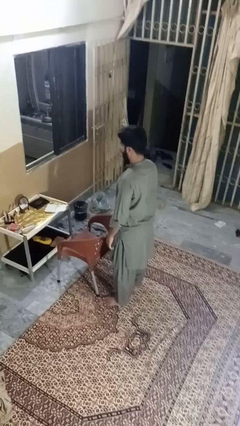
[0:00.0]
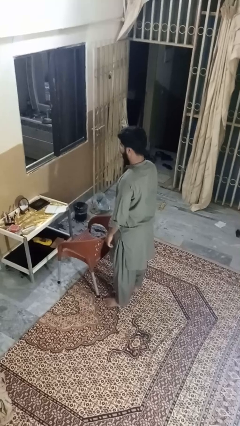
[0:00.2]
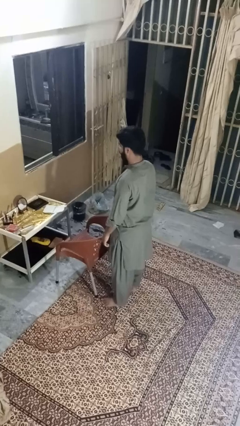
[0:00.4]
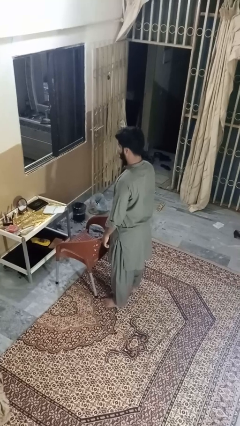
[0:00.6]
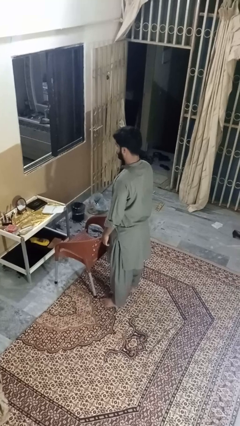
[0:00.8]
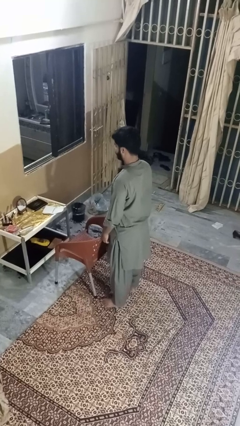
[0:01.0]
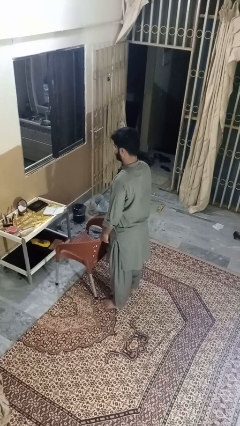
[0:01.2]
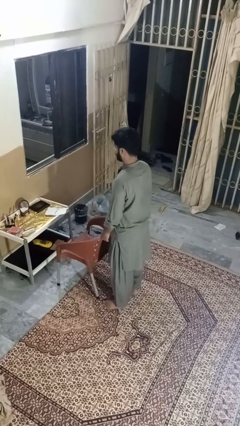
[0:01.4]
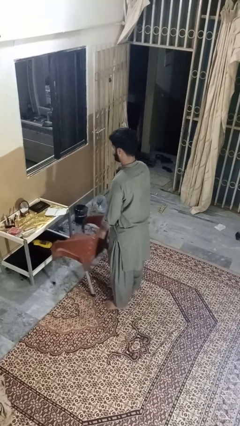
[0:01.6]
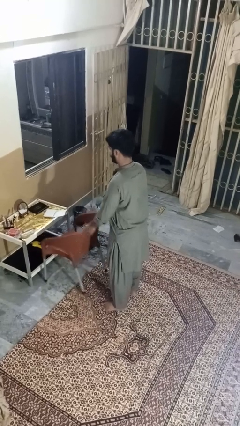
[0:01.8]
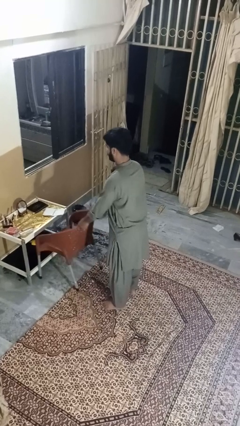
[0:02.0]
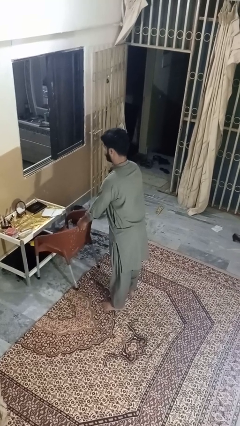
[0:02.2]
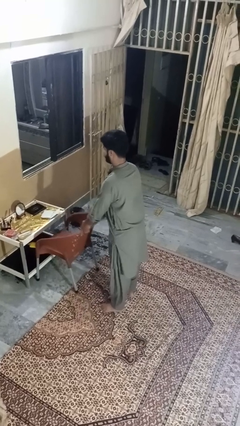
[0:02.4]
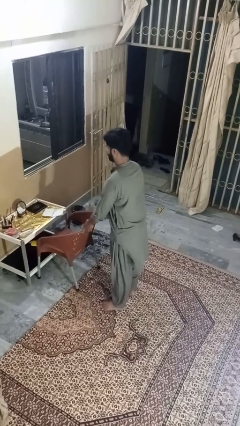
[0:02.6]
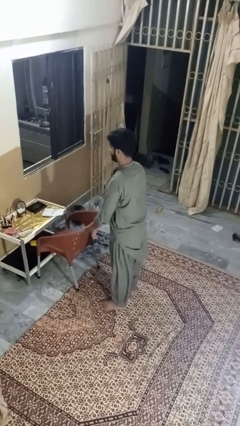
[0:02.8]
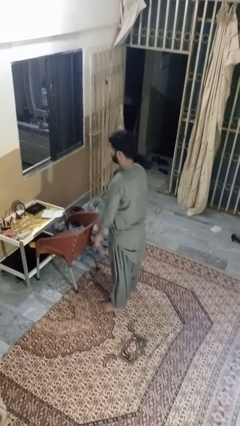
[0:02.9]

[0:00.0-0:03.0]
person pushes in chair

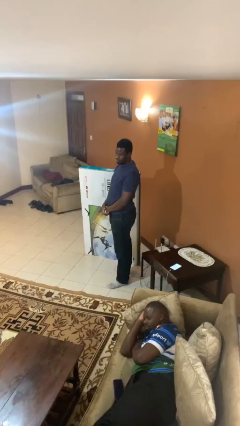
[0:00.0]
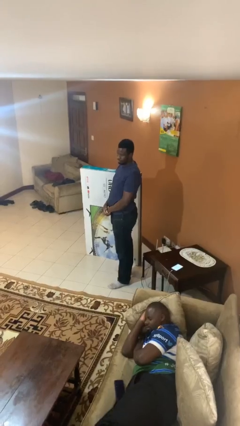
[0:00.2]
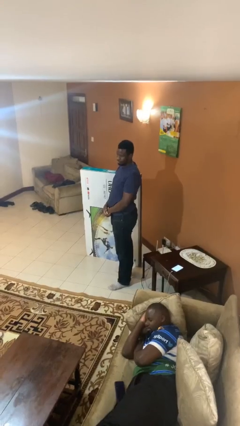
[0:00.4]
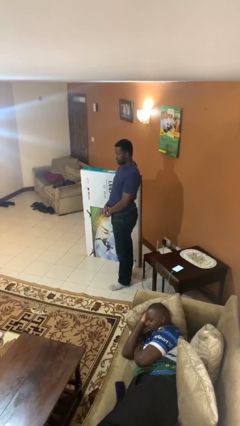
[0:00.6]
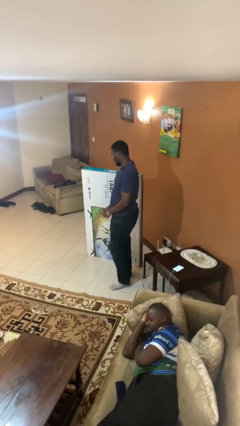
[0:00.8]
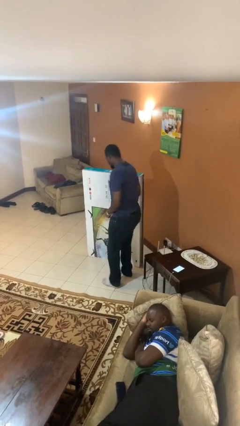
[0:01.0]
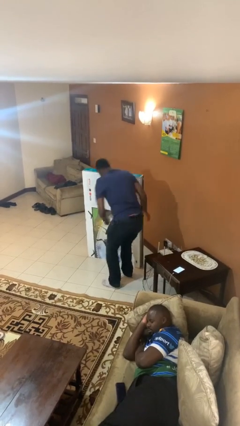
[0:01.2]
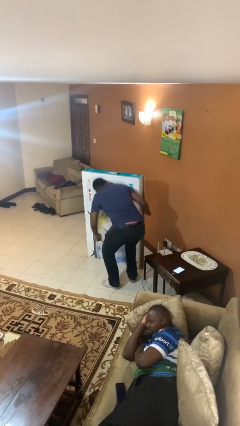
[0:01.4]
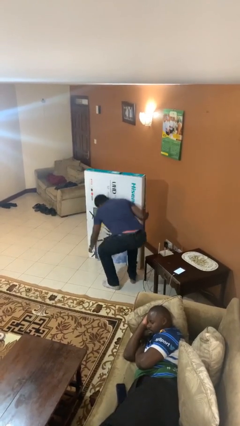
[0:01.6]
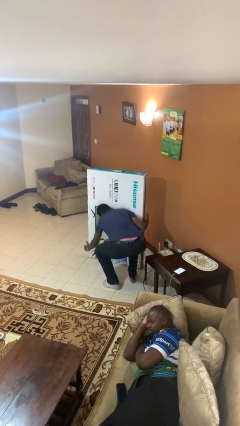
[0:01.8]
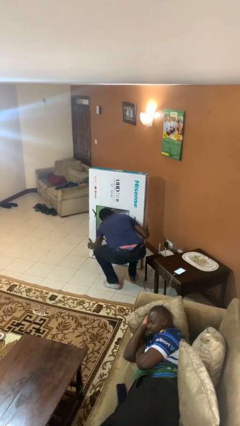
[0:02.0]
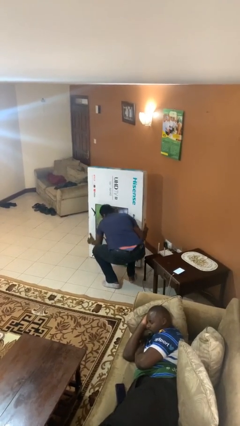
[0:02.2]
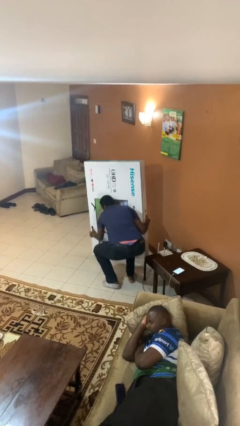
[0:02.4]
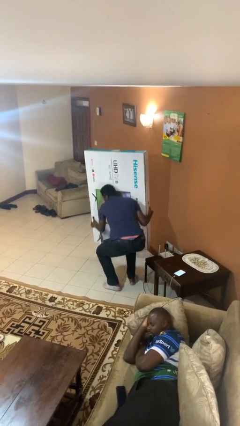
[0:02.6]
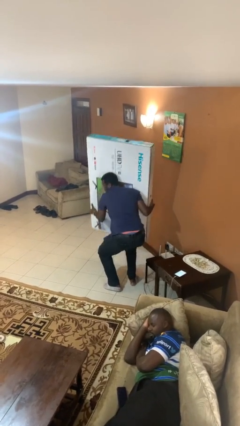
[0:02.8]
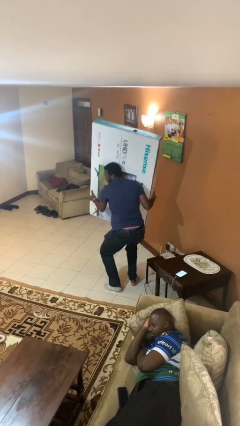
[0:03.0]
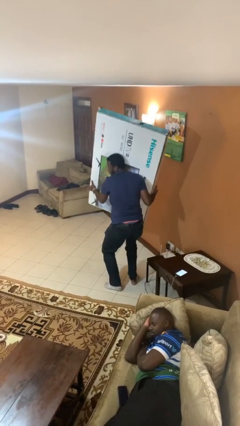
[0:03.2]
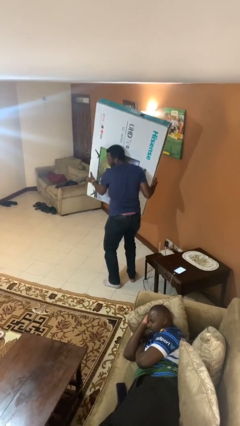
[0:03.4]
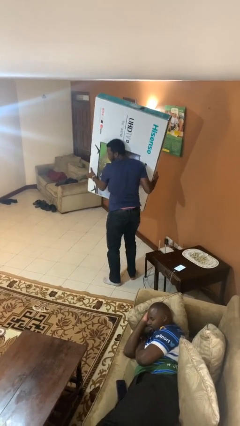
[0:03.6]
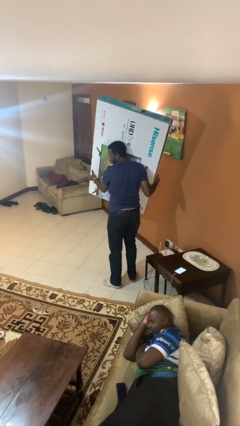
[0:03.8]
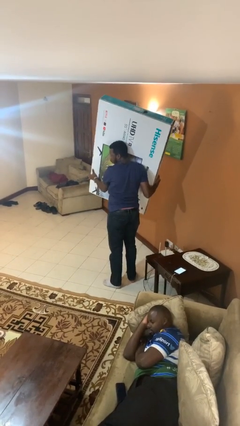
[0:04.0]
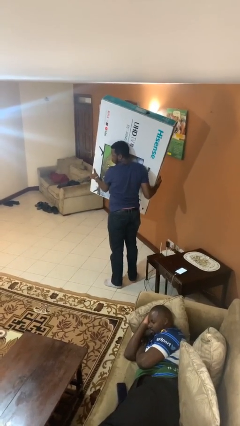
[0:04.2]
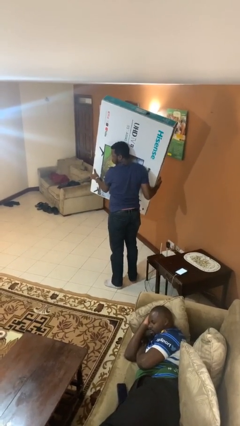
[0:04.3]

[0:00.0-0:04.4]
person picks up object from floor

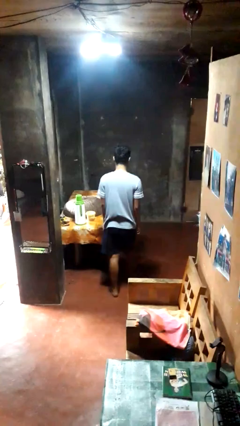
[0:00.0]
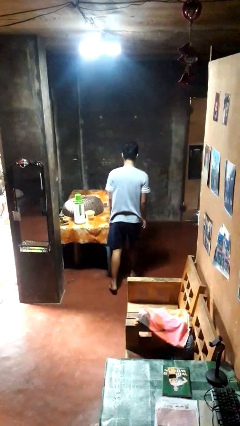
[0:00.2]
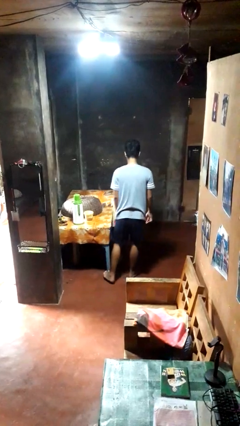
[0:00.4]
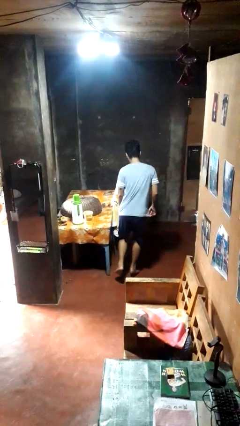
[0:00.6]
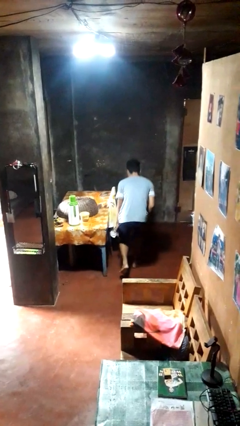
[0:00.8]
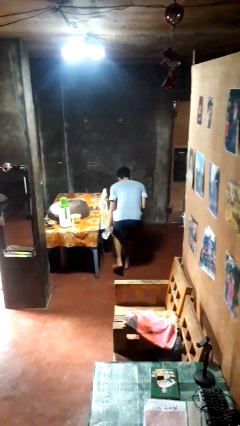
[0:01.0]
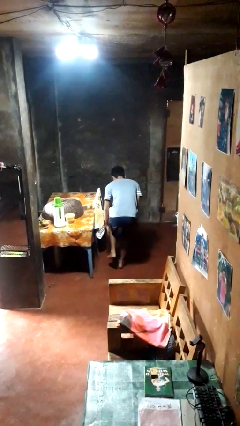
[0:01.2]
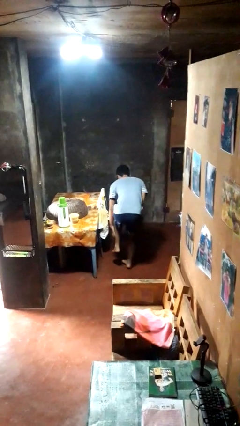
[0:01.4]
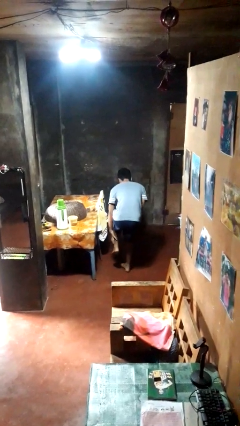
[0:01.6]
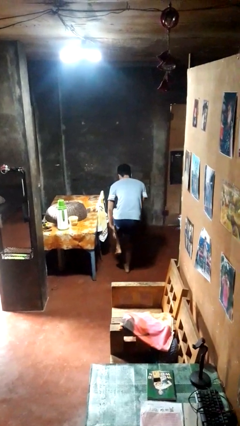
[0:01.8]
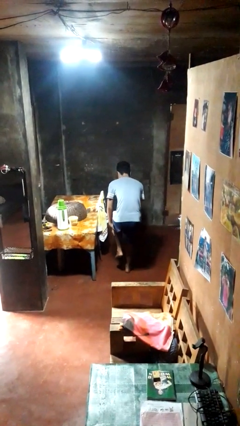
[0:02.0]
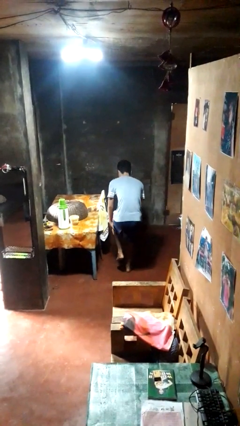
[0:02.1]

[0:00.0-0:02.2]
person bumps into table

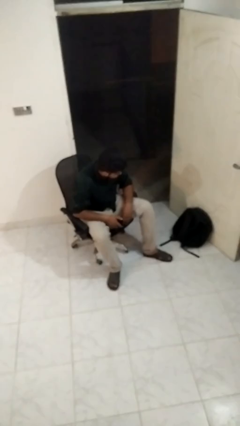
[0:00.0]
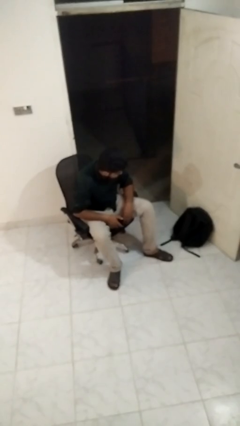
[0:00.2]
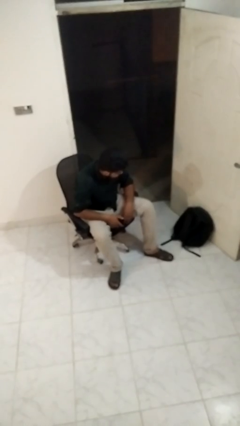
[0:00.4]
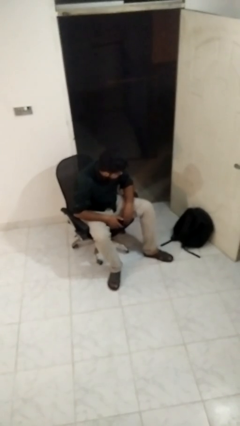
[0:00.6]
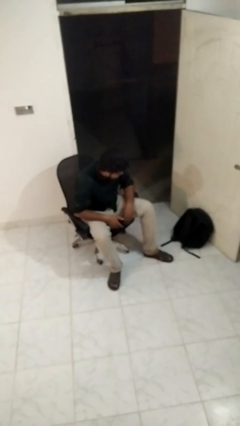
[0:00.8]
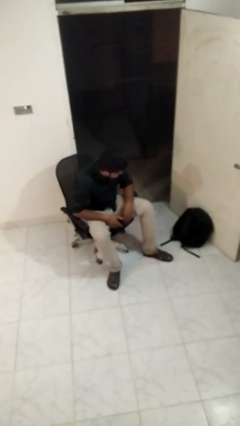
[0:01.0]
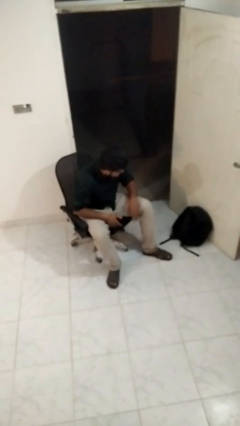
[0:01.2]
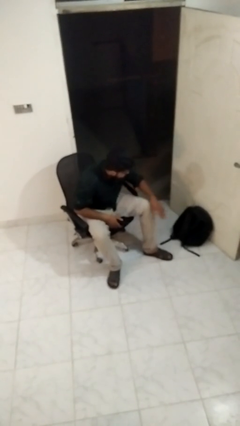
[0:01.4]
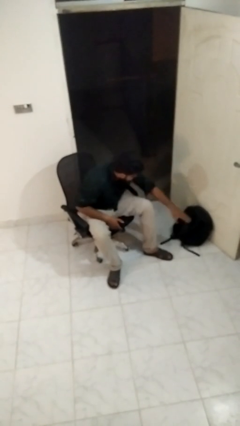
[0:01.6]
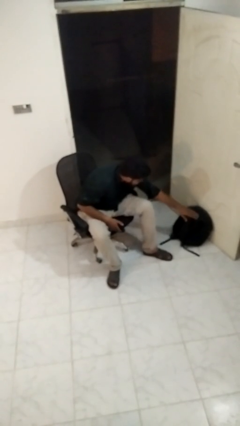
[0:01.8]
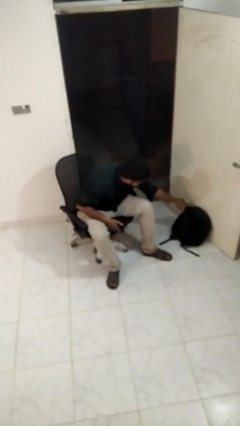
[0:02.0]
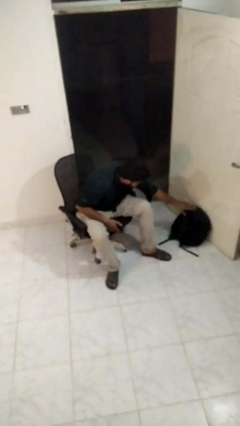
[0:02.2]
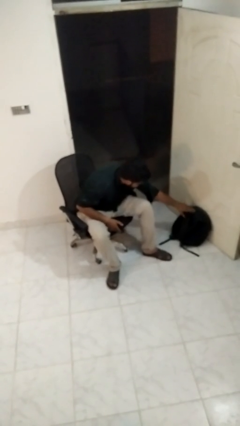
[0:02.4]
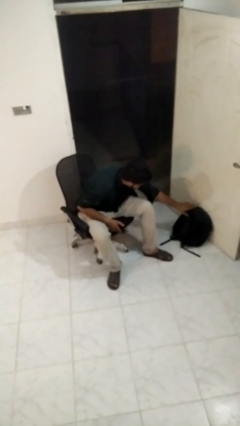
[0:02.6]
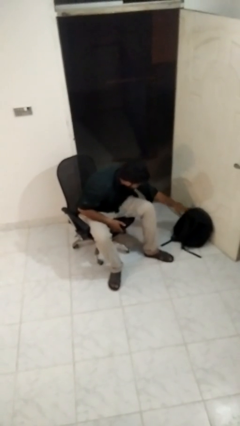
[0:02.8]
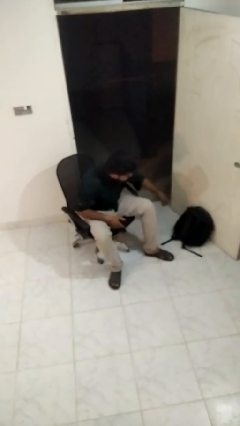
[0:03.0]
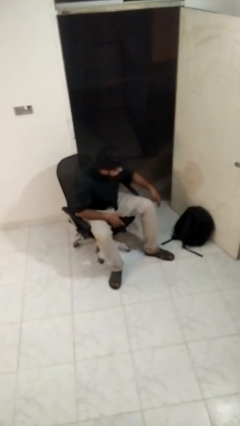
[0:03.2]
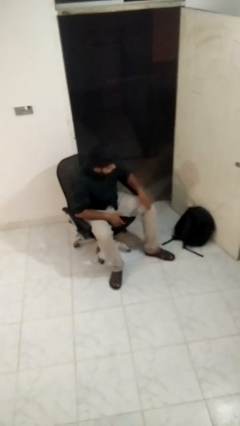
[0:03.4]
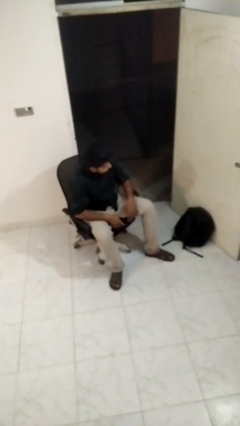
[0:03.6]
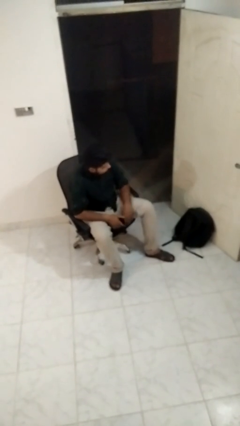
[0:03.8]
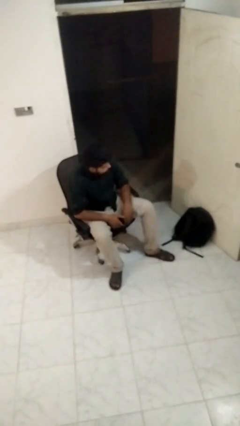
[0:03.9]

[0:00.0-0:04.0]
person waves hand over object

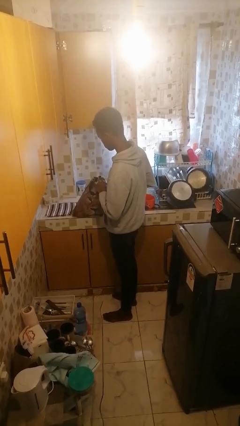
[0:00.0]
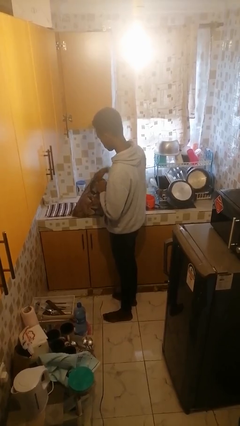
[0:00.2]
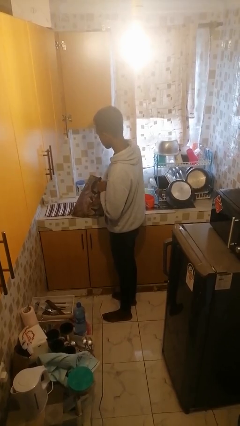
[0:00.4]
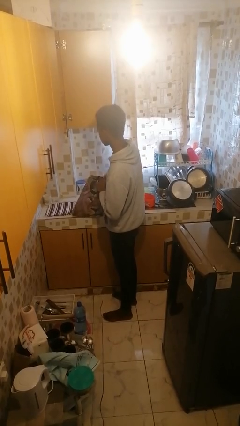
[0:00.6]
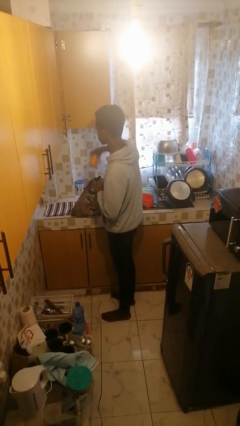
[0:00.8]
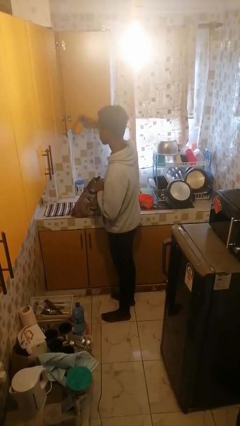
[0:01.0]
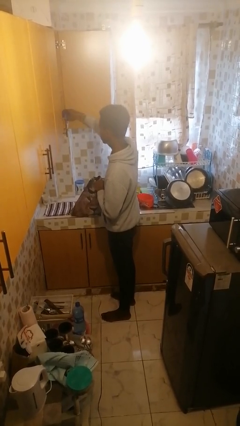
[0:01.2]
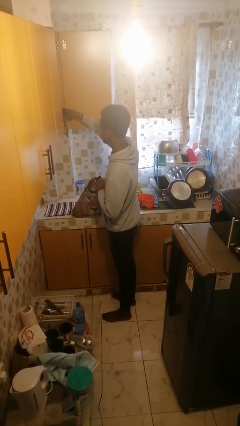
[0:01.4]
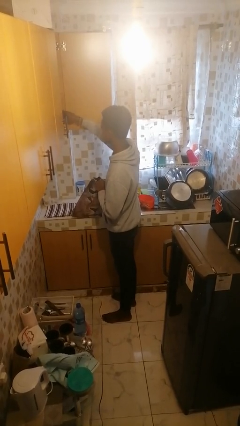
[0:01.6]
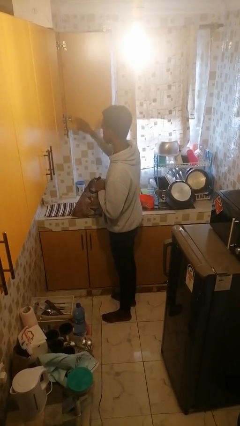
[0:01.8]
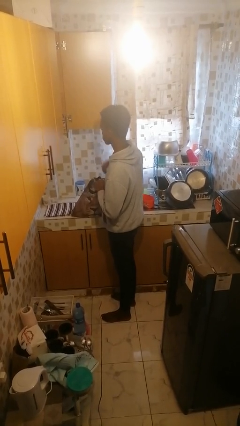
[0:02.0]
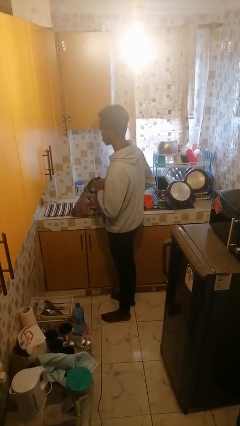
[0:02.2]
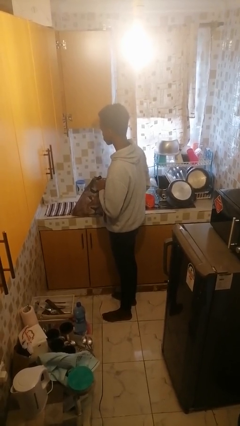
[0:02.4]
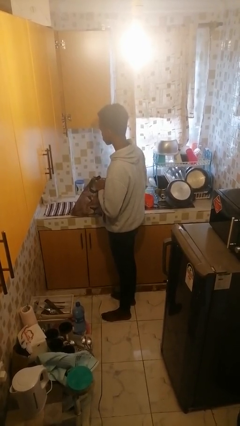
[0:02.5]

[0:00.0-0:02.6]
person loads groceries into cabinet

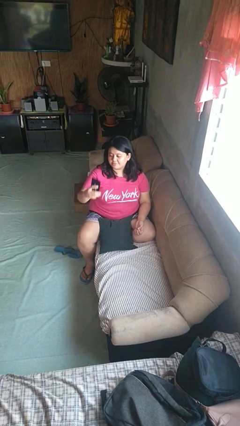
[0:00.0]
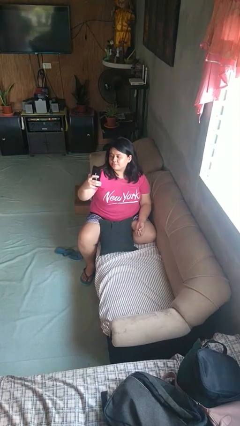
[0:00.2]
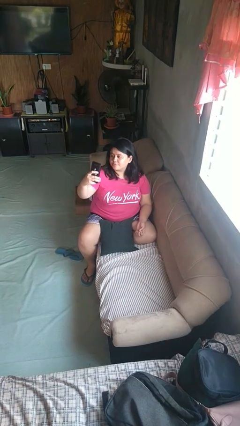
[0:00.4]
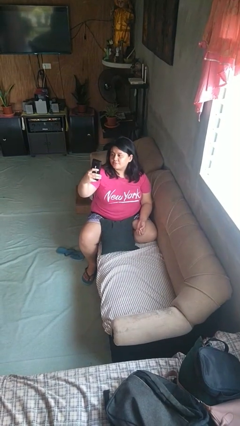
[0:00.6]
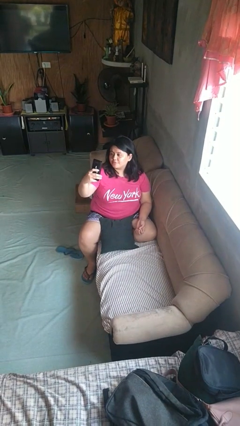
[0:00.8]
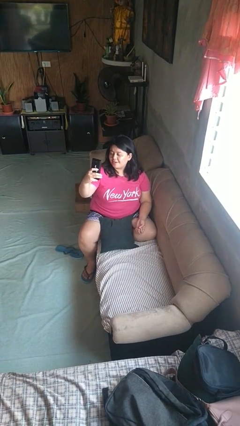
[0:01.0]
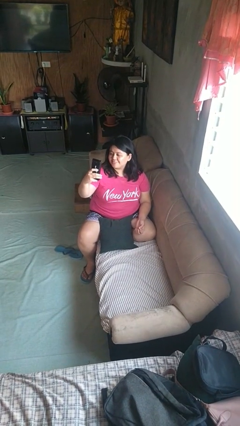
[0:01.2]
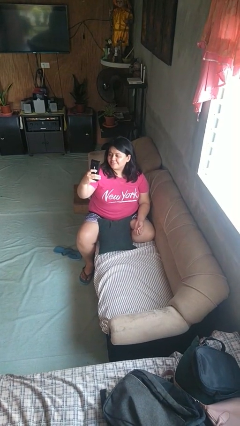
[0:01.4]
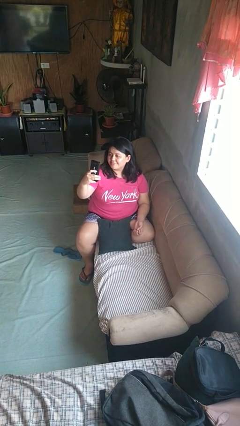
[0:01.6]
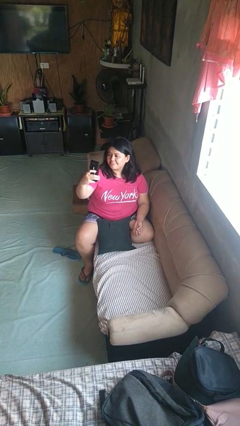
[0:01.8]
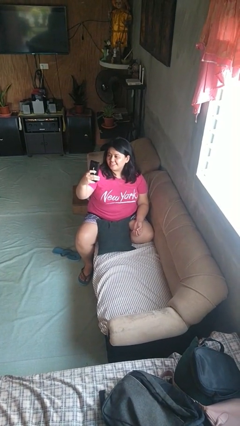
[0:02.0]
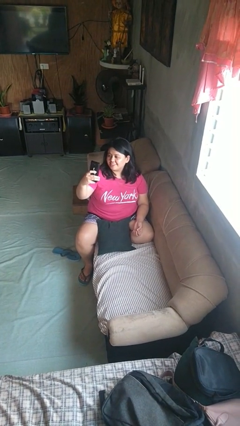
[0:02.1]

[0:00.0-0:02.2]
person takes selfie
